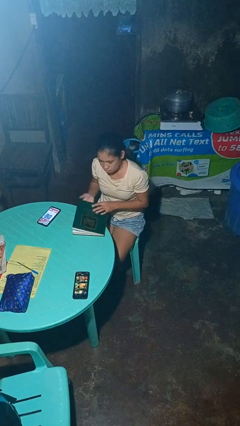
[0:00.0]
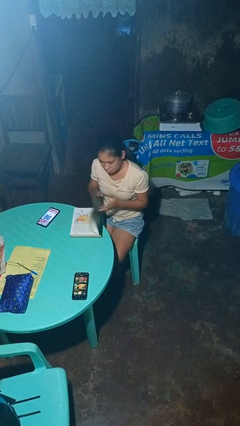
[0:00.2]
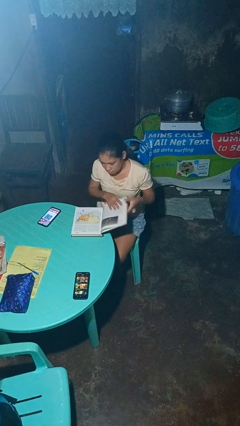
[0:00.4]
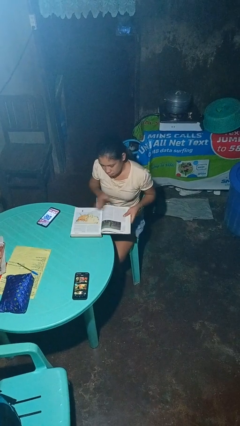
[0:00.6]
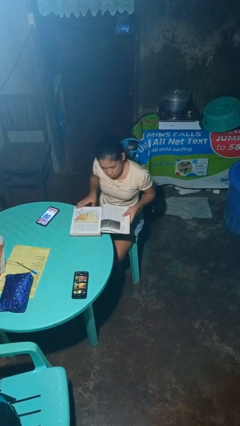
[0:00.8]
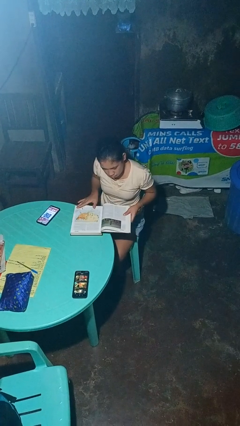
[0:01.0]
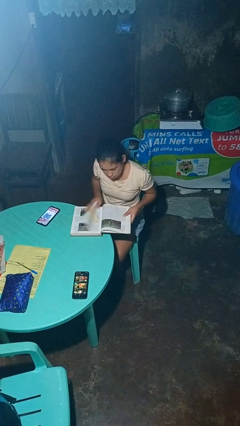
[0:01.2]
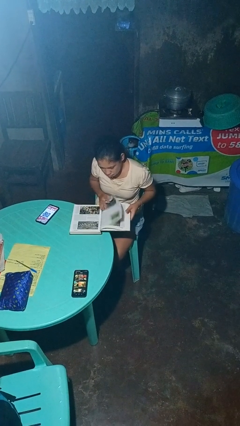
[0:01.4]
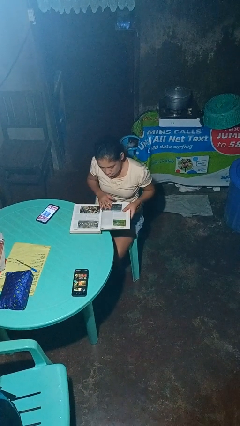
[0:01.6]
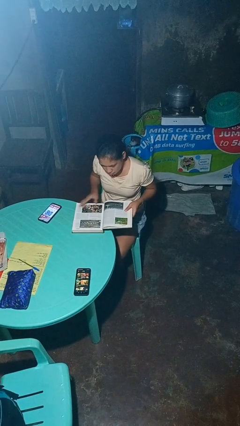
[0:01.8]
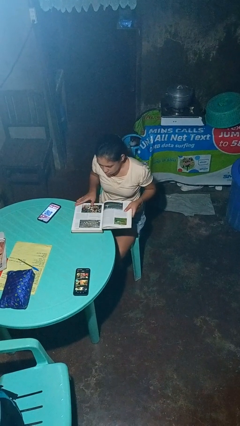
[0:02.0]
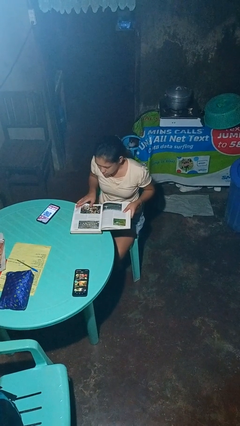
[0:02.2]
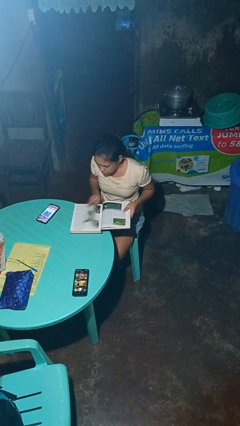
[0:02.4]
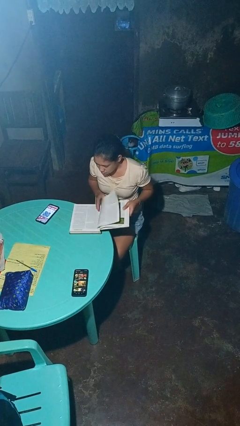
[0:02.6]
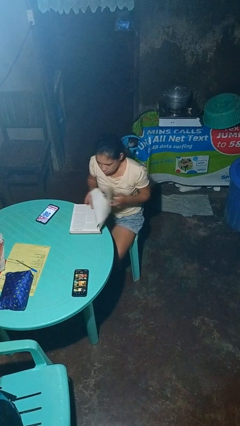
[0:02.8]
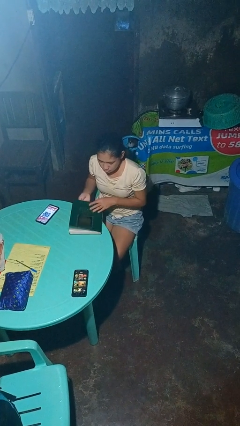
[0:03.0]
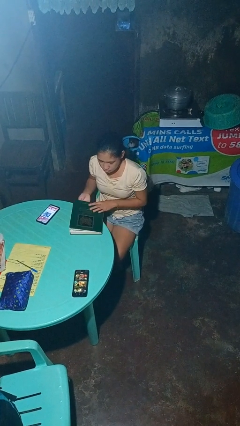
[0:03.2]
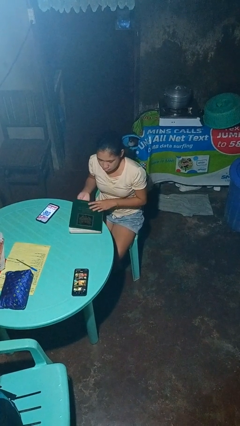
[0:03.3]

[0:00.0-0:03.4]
person reads book

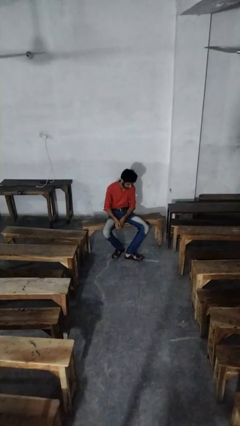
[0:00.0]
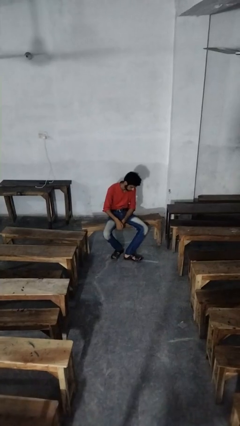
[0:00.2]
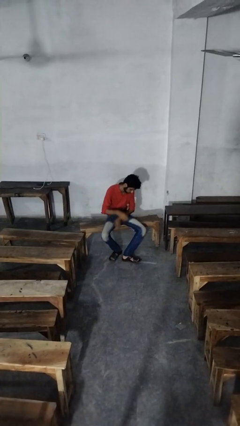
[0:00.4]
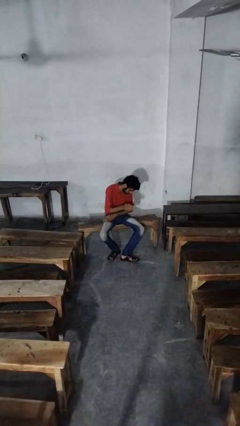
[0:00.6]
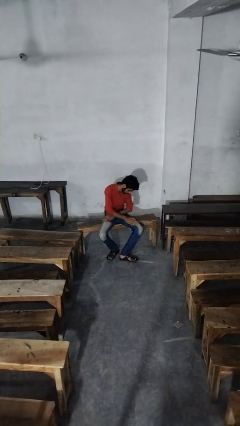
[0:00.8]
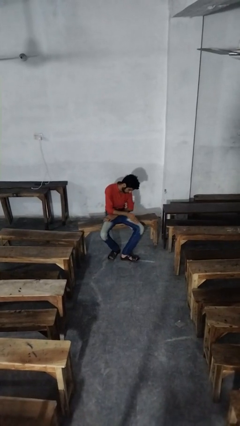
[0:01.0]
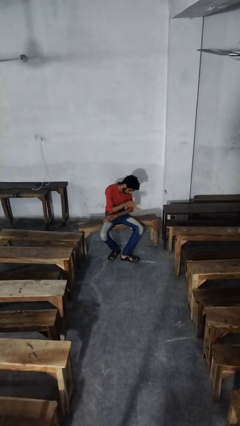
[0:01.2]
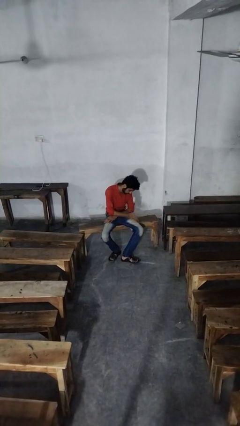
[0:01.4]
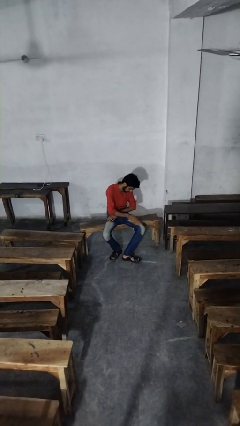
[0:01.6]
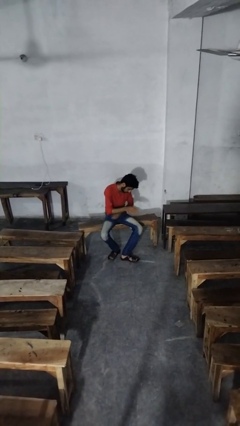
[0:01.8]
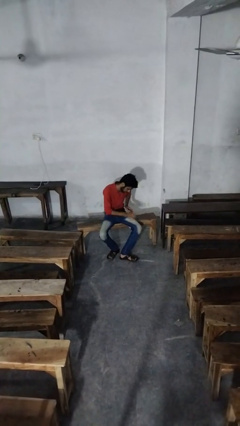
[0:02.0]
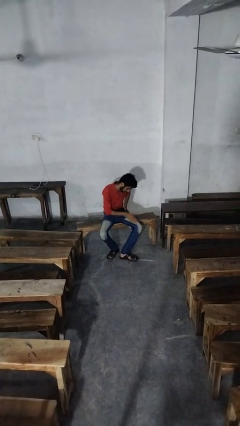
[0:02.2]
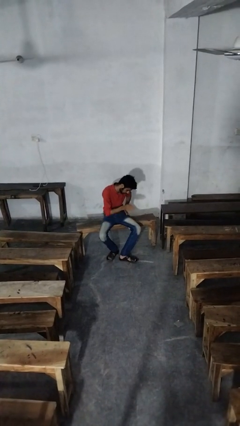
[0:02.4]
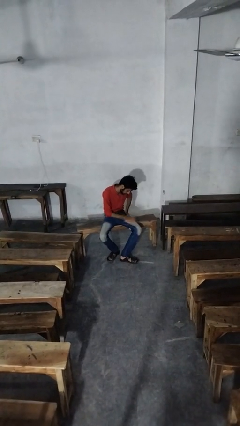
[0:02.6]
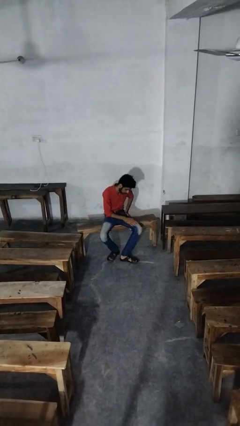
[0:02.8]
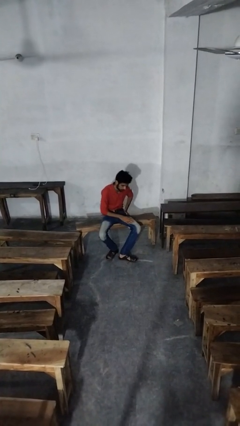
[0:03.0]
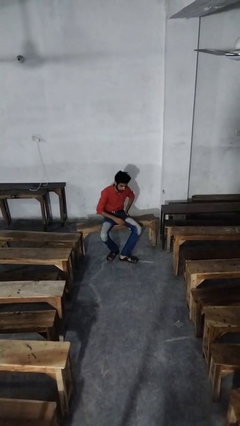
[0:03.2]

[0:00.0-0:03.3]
person slaps hands on thighs

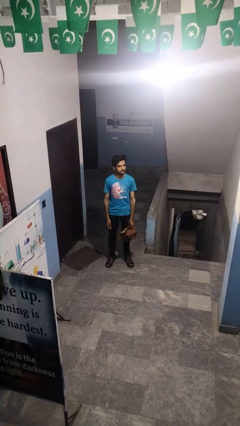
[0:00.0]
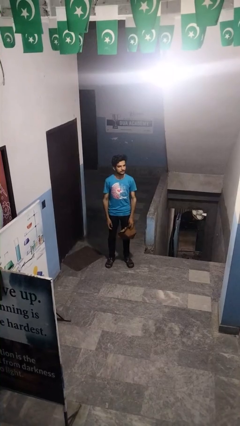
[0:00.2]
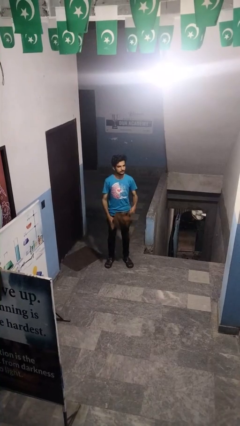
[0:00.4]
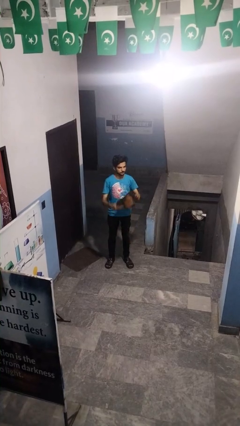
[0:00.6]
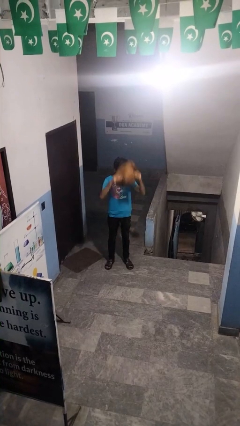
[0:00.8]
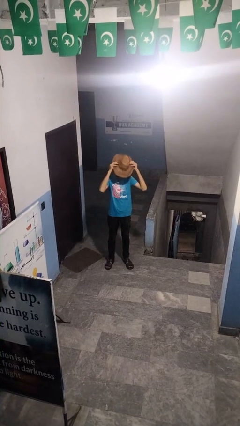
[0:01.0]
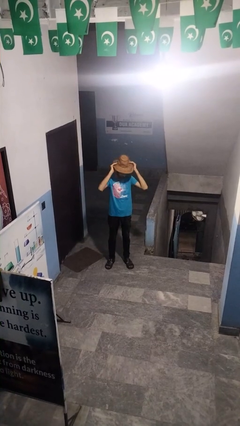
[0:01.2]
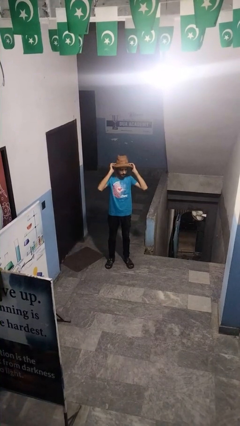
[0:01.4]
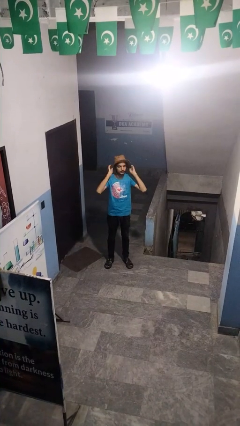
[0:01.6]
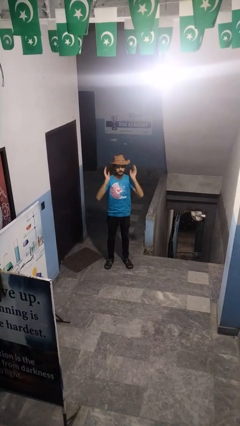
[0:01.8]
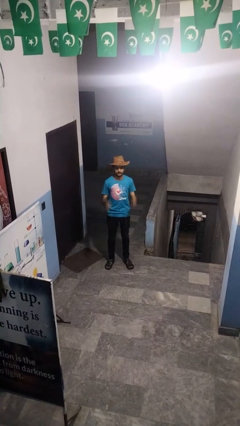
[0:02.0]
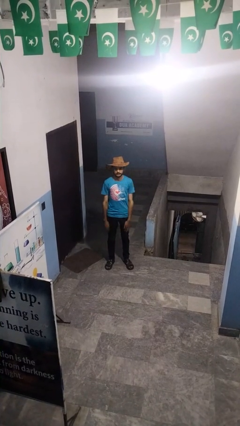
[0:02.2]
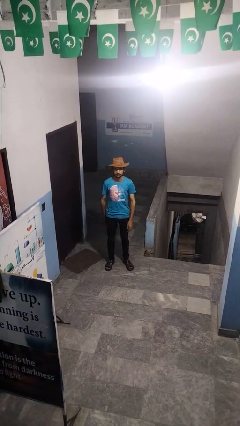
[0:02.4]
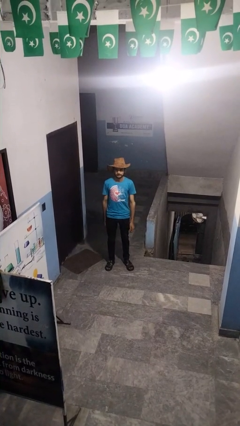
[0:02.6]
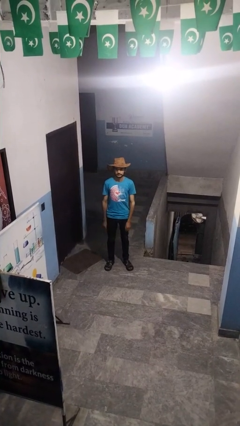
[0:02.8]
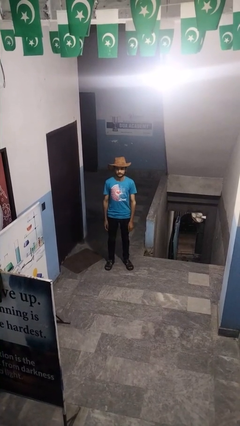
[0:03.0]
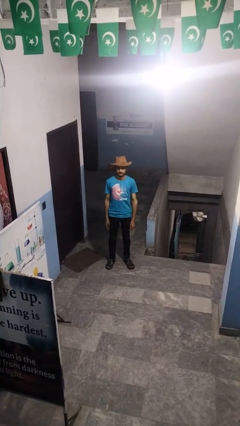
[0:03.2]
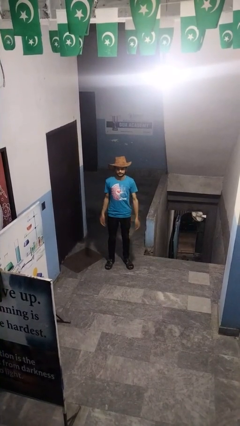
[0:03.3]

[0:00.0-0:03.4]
person puts on hat

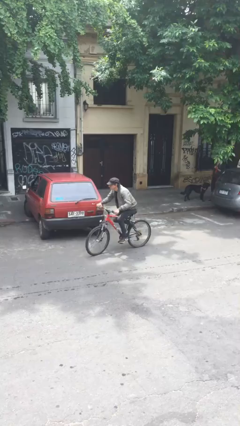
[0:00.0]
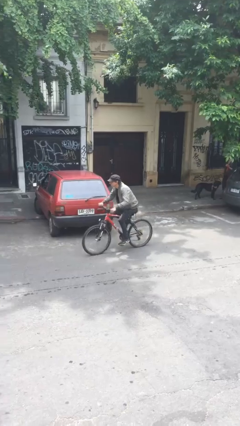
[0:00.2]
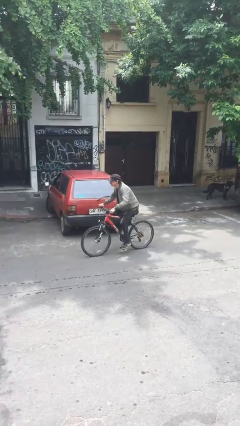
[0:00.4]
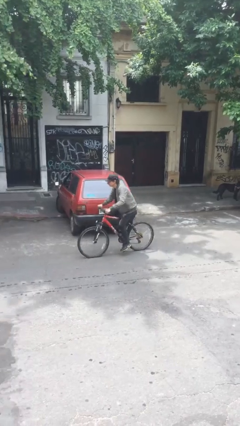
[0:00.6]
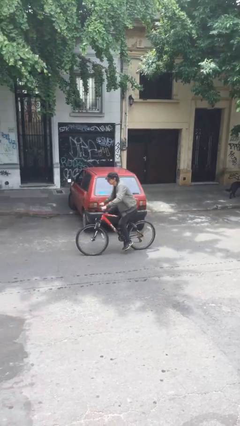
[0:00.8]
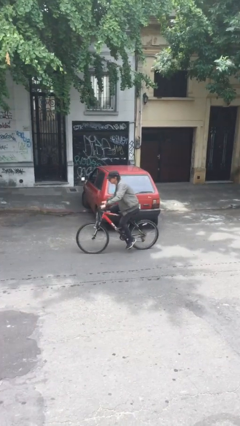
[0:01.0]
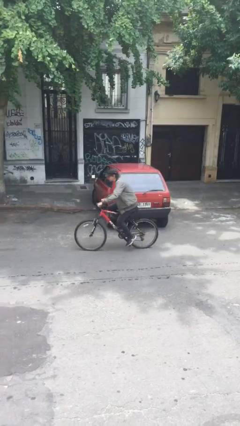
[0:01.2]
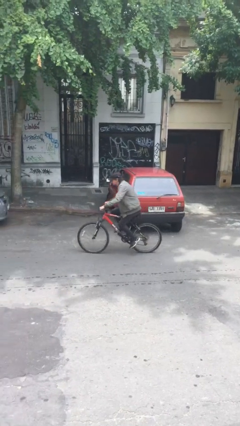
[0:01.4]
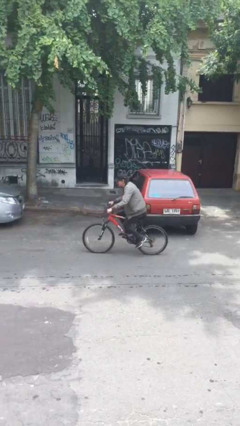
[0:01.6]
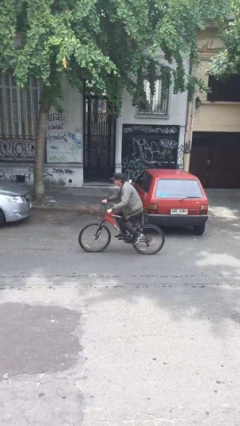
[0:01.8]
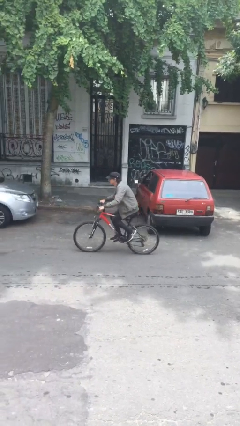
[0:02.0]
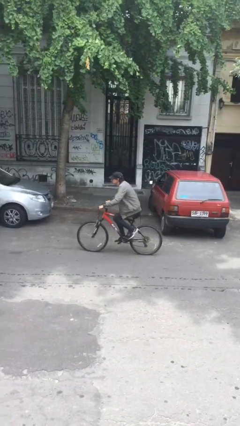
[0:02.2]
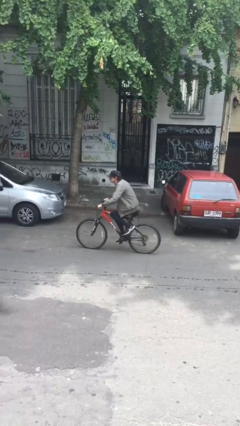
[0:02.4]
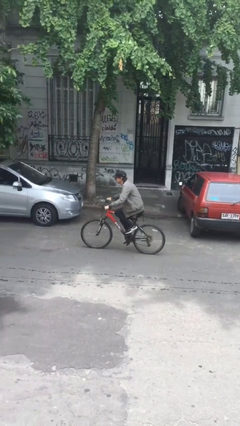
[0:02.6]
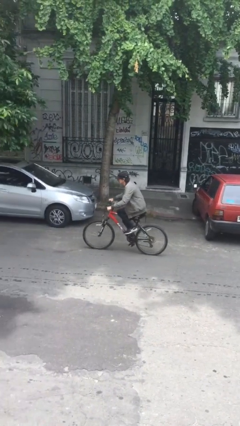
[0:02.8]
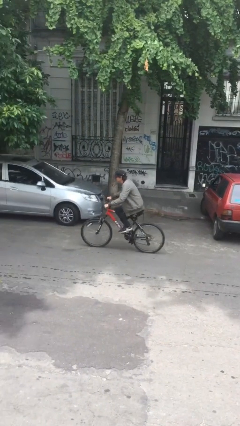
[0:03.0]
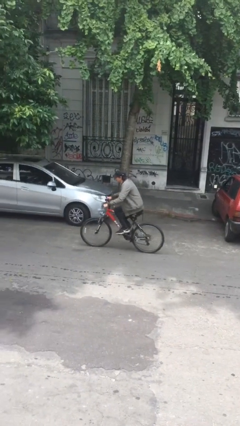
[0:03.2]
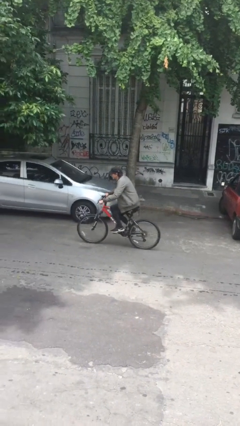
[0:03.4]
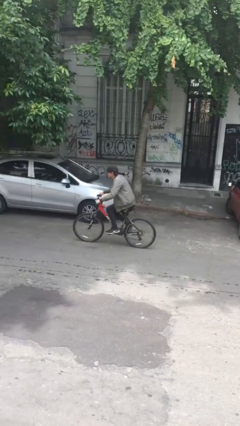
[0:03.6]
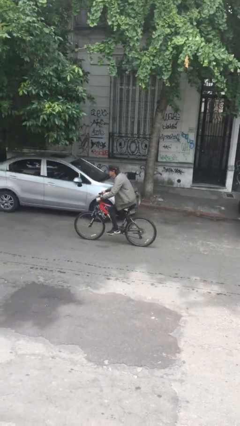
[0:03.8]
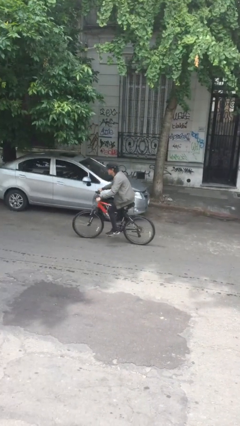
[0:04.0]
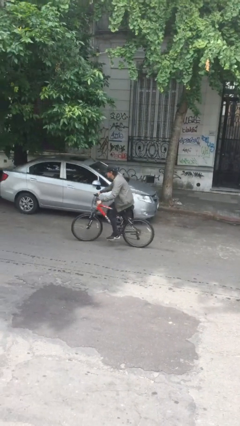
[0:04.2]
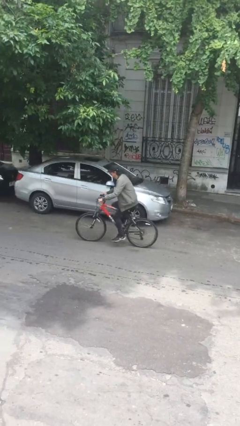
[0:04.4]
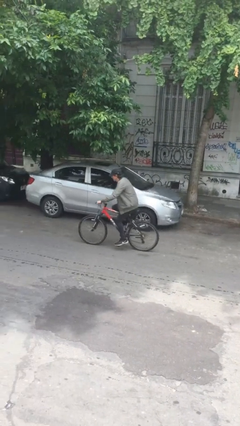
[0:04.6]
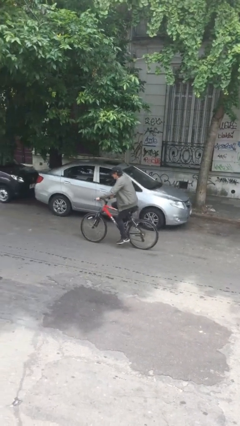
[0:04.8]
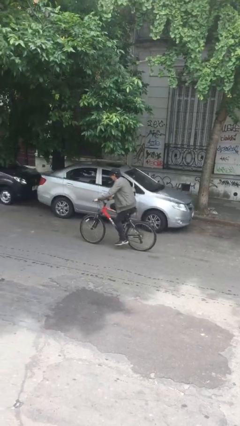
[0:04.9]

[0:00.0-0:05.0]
person rides bicycle

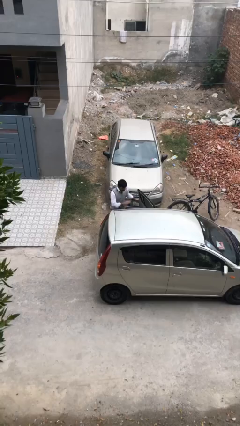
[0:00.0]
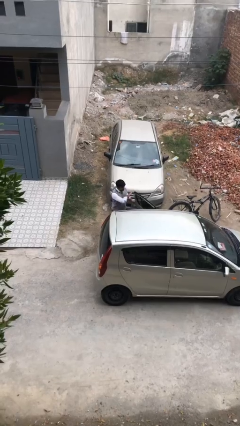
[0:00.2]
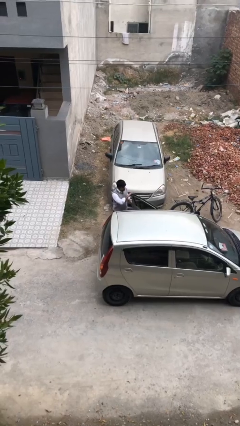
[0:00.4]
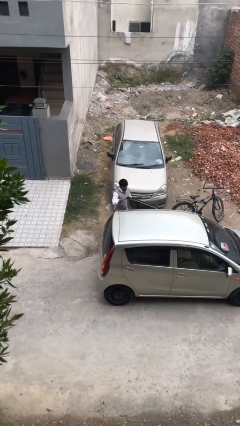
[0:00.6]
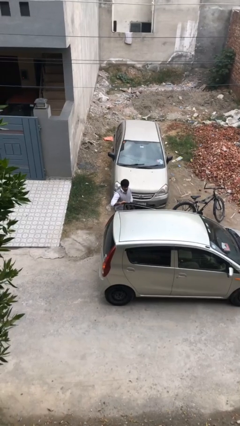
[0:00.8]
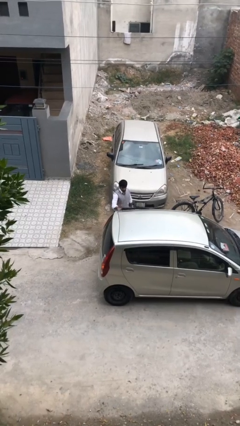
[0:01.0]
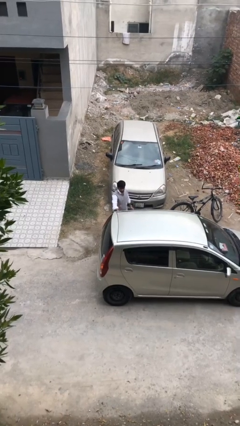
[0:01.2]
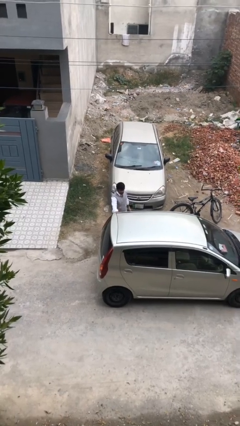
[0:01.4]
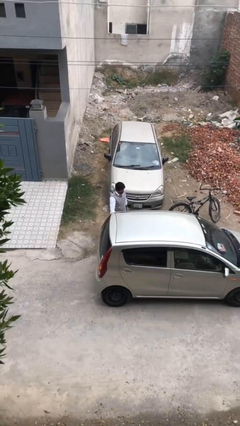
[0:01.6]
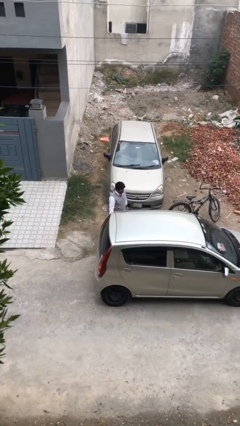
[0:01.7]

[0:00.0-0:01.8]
person closes car door

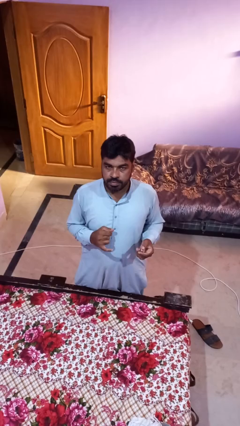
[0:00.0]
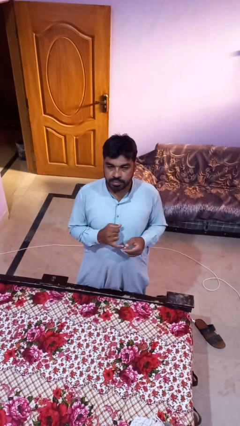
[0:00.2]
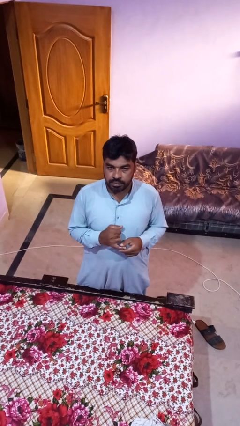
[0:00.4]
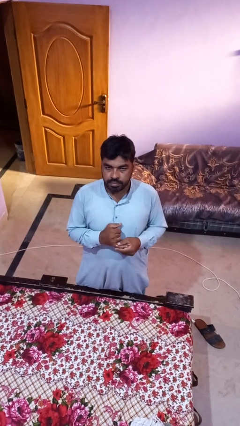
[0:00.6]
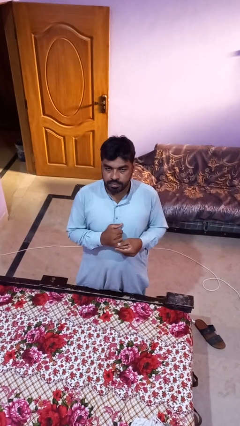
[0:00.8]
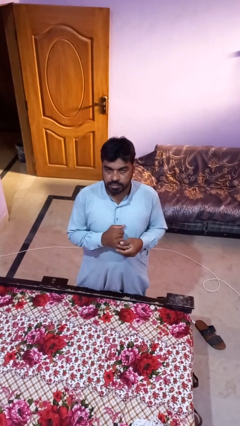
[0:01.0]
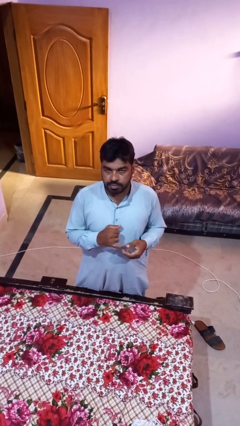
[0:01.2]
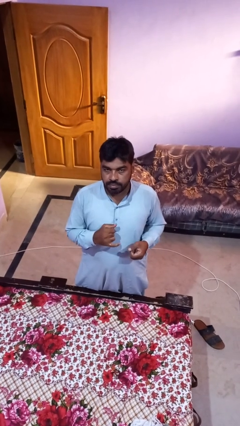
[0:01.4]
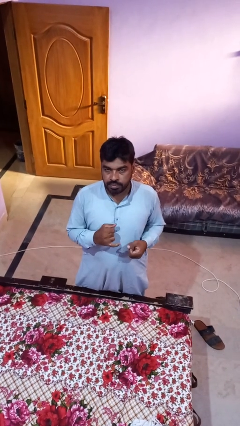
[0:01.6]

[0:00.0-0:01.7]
person puts on ring
